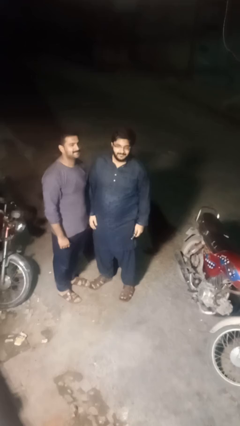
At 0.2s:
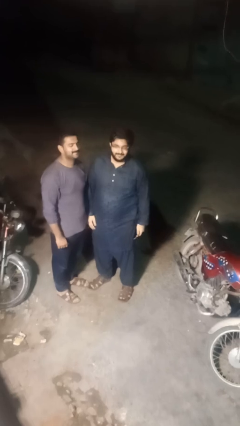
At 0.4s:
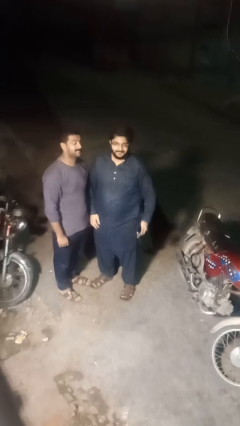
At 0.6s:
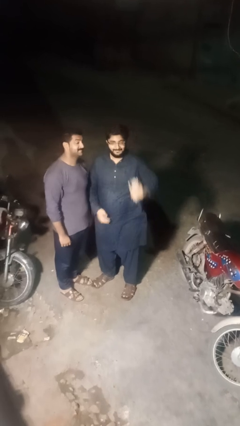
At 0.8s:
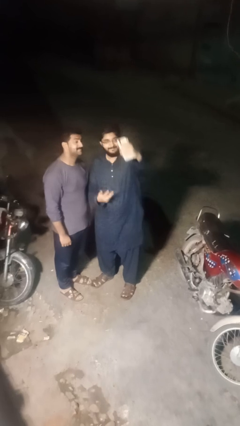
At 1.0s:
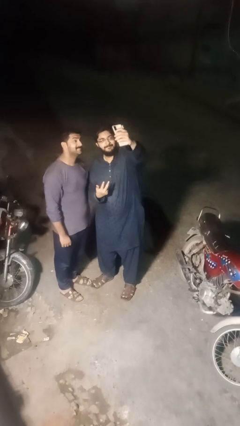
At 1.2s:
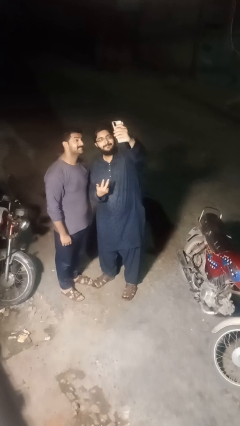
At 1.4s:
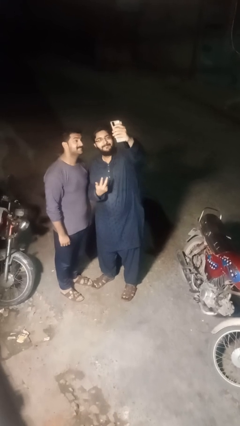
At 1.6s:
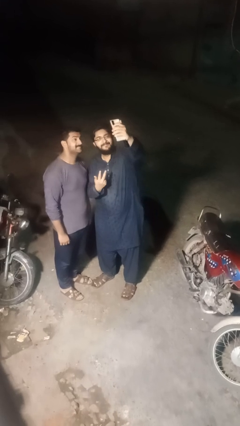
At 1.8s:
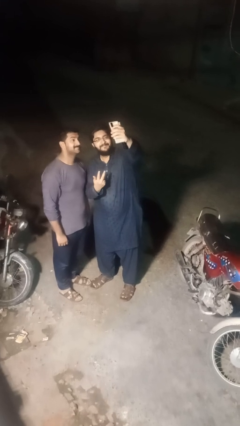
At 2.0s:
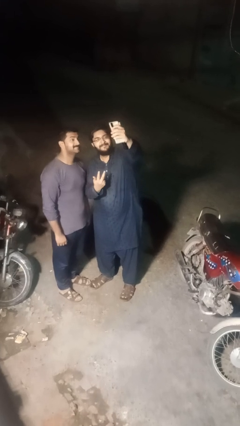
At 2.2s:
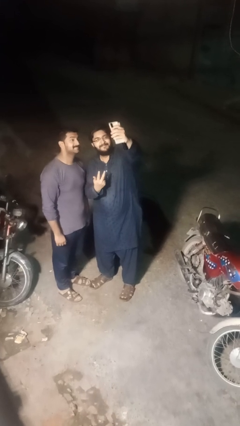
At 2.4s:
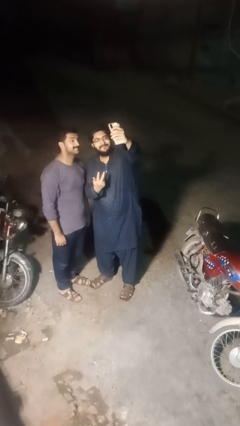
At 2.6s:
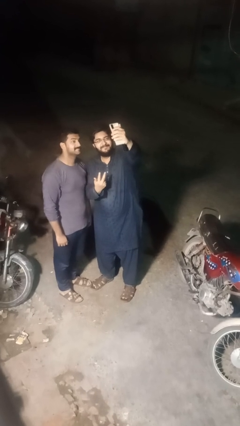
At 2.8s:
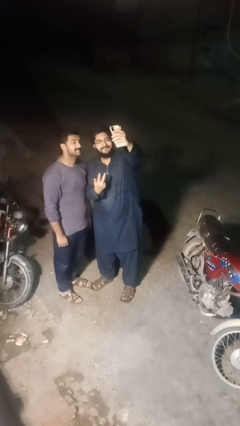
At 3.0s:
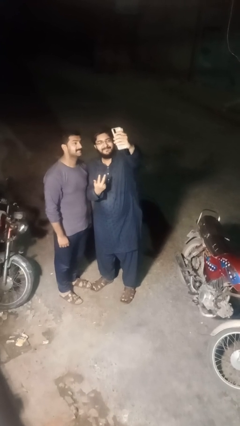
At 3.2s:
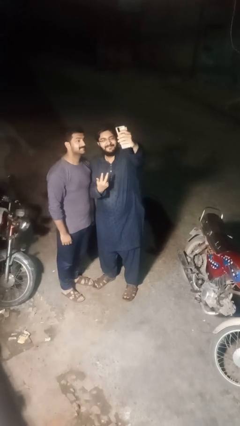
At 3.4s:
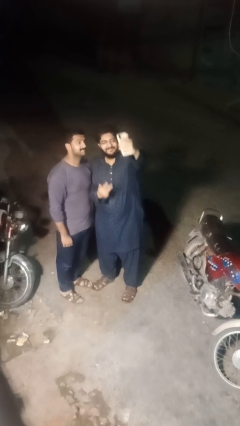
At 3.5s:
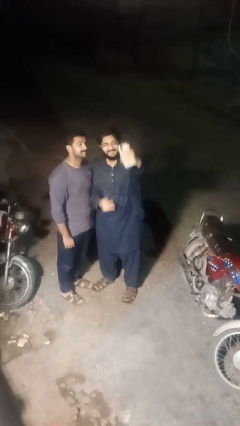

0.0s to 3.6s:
person takes selfie with person

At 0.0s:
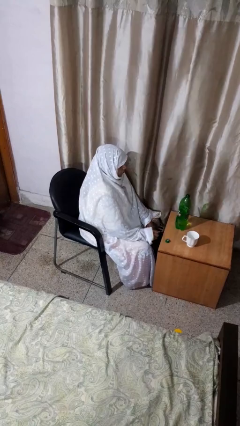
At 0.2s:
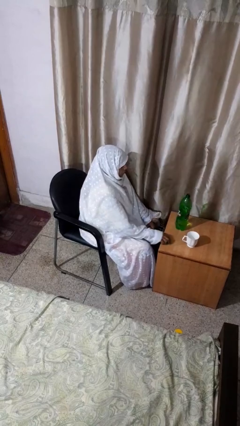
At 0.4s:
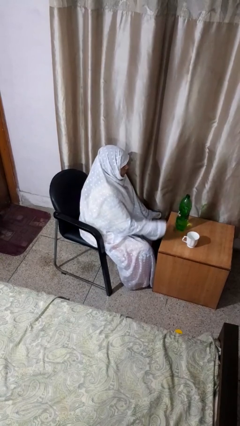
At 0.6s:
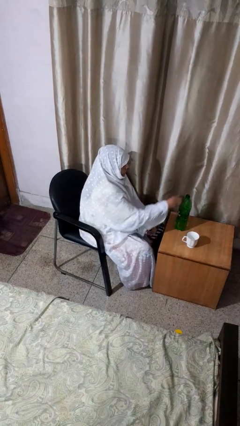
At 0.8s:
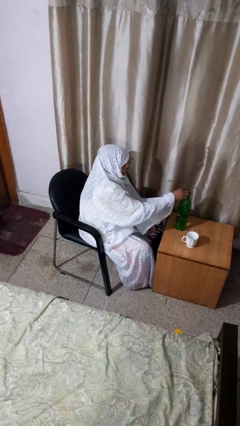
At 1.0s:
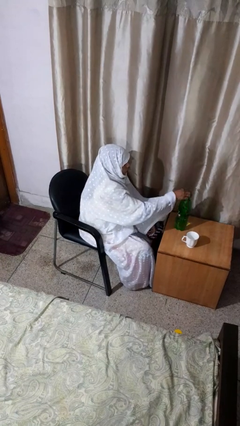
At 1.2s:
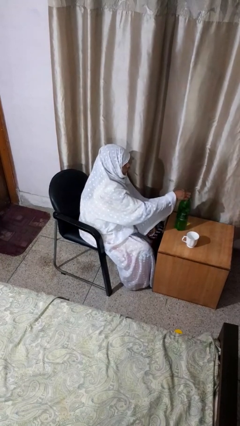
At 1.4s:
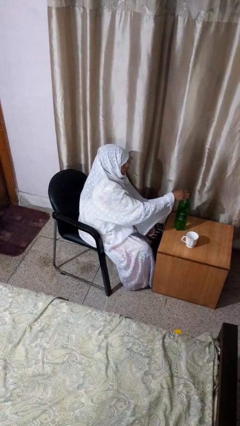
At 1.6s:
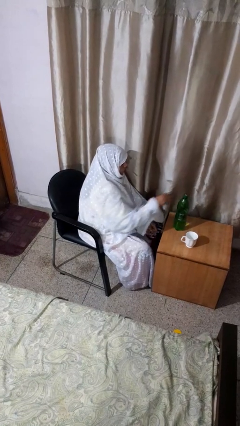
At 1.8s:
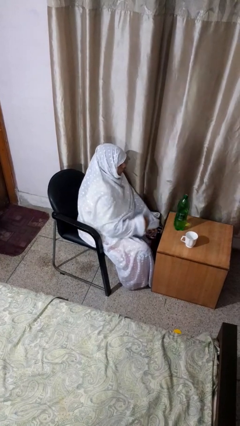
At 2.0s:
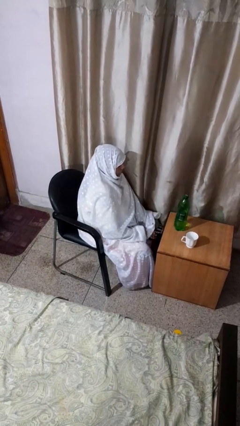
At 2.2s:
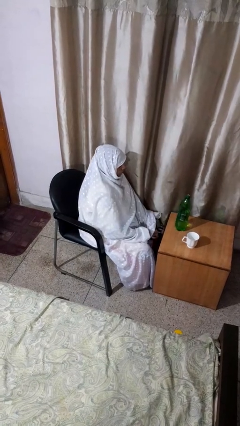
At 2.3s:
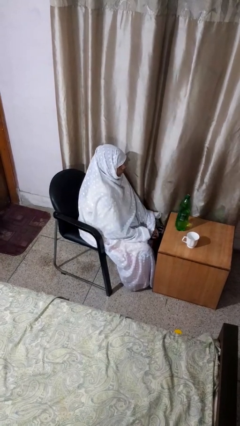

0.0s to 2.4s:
person screws lid to bottle

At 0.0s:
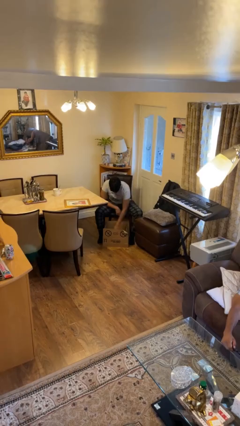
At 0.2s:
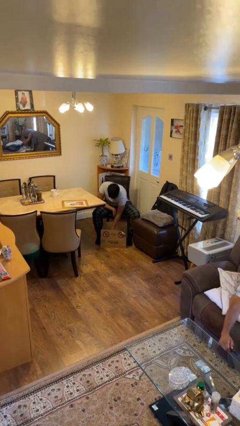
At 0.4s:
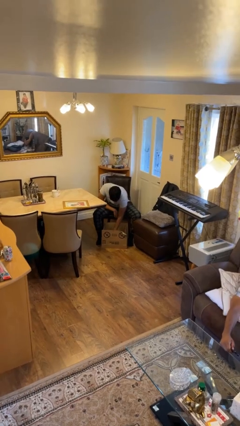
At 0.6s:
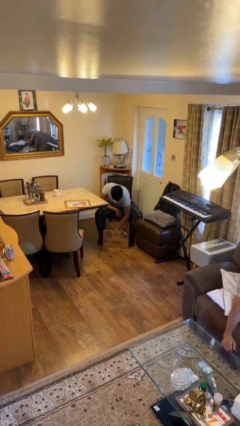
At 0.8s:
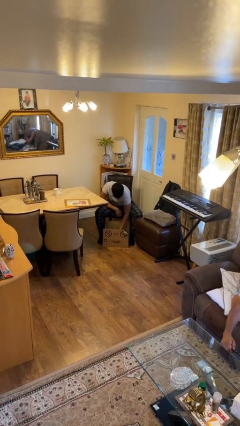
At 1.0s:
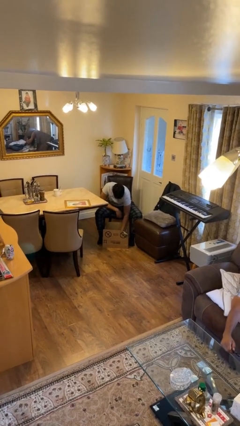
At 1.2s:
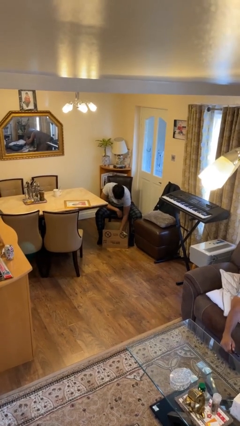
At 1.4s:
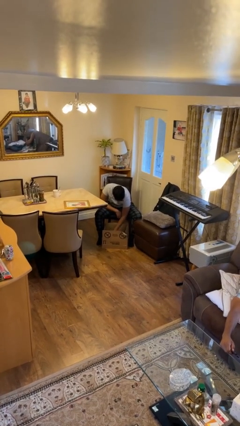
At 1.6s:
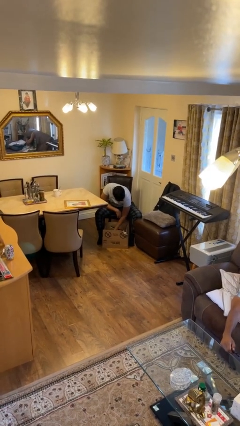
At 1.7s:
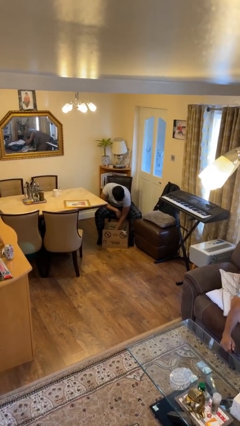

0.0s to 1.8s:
person searches in box

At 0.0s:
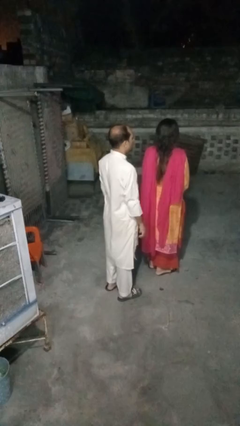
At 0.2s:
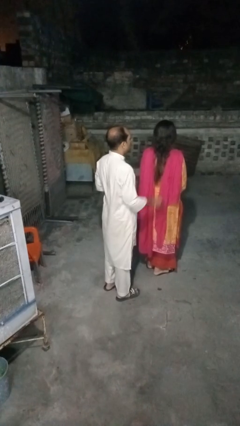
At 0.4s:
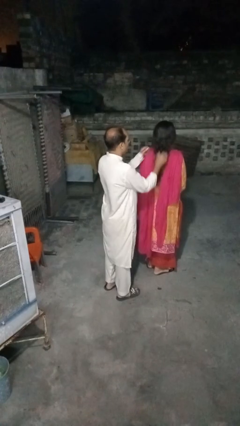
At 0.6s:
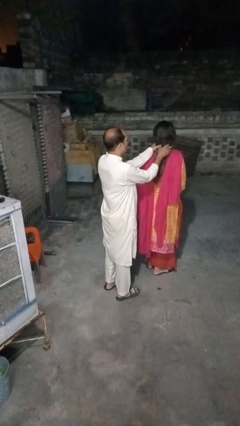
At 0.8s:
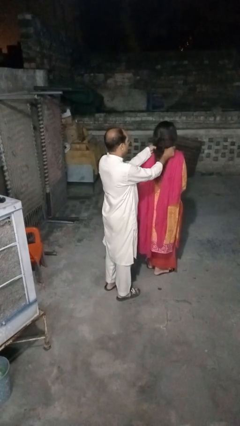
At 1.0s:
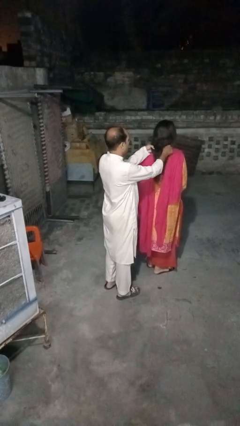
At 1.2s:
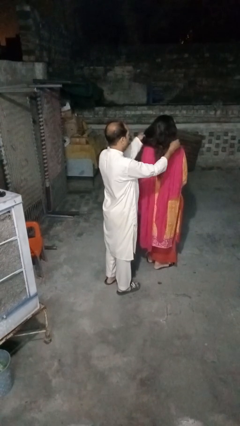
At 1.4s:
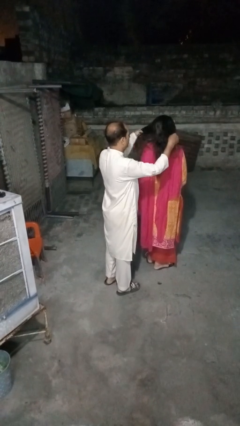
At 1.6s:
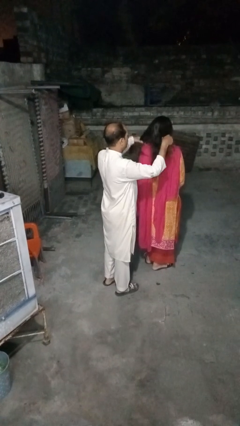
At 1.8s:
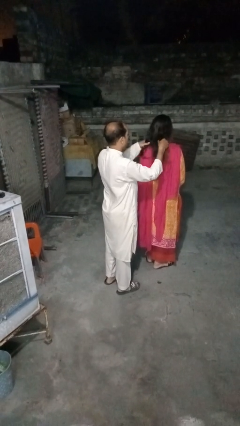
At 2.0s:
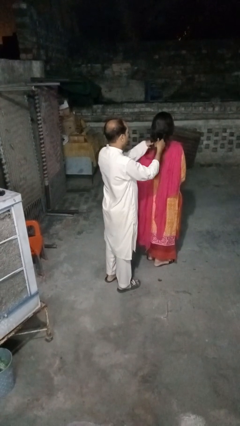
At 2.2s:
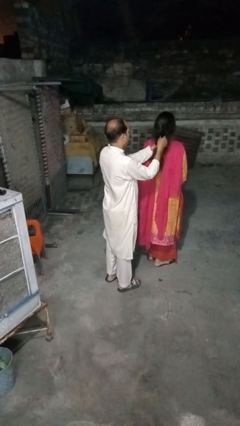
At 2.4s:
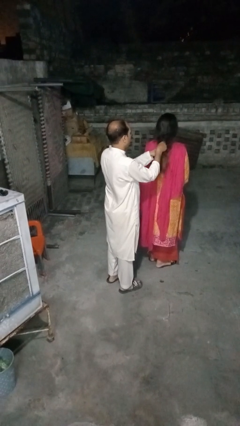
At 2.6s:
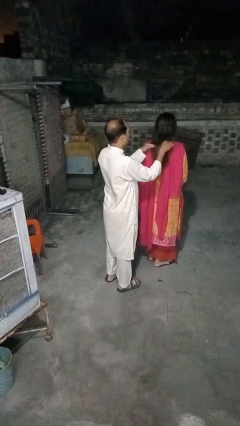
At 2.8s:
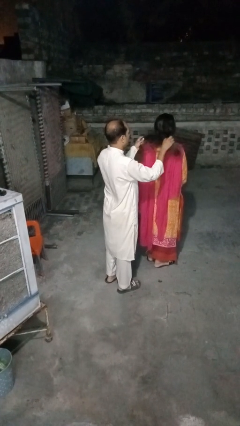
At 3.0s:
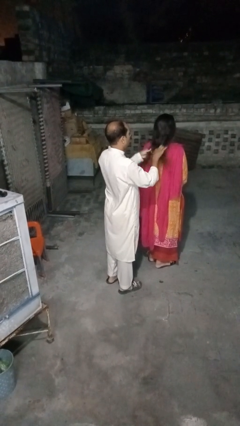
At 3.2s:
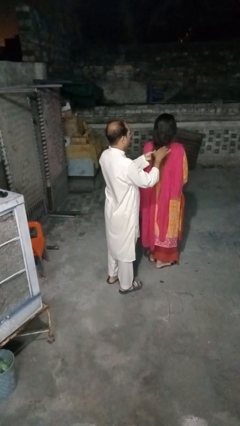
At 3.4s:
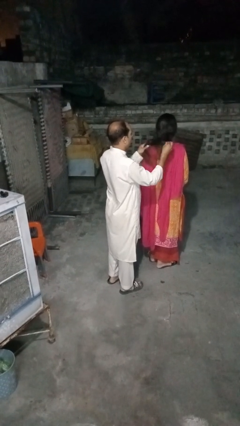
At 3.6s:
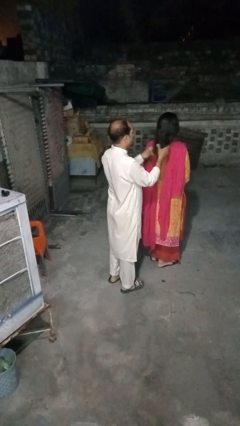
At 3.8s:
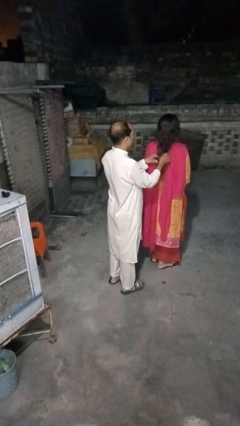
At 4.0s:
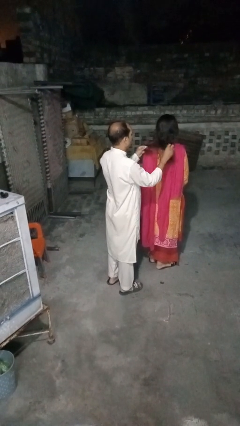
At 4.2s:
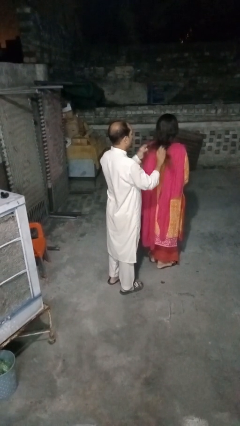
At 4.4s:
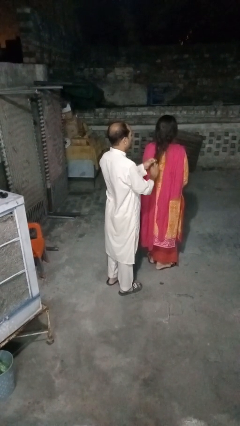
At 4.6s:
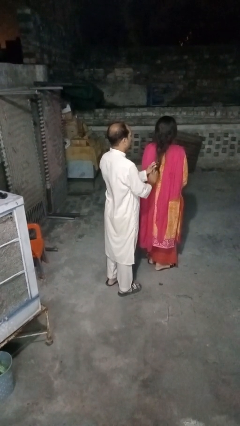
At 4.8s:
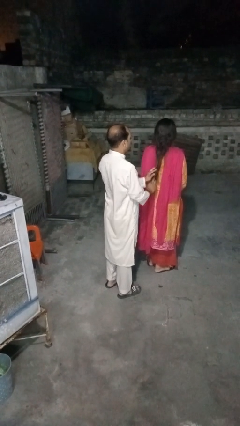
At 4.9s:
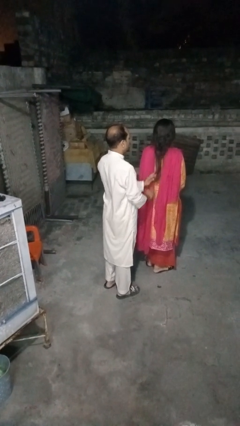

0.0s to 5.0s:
person braids hair of person

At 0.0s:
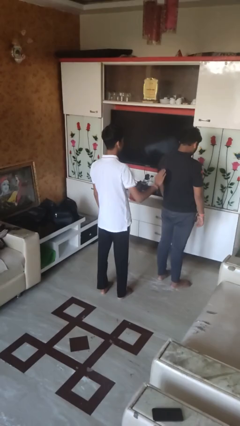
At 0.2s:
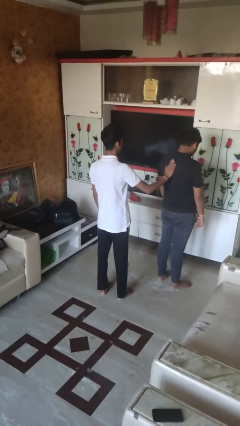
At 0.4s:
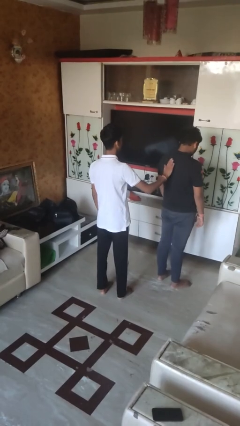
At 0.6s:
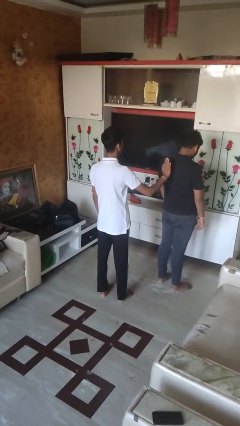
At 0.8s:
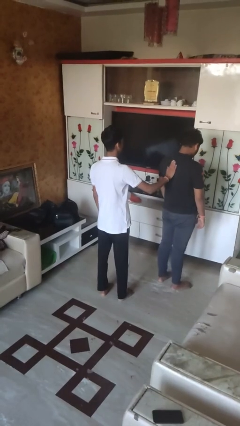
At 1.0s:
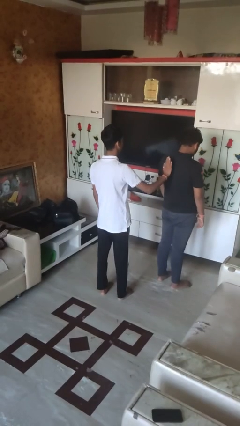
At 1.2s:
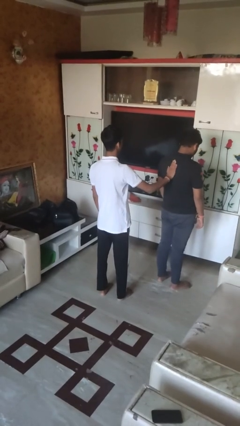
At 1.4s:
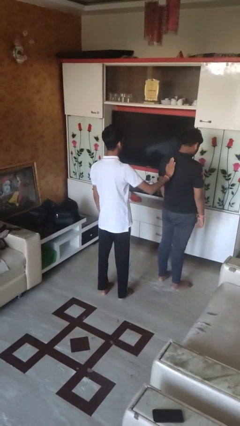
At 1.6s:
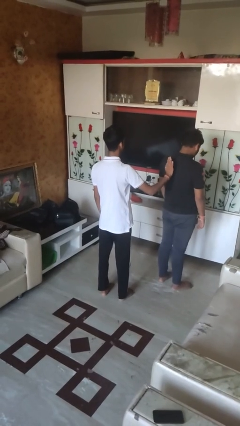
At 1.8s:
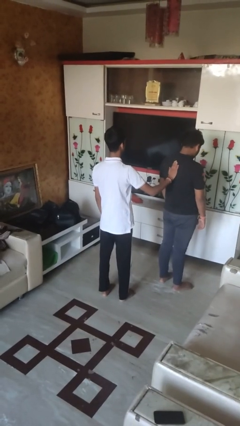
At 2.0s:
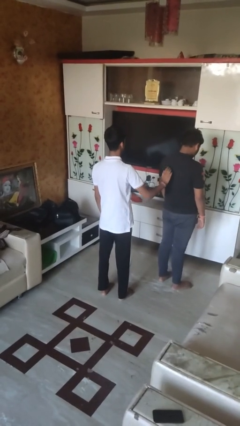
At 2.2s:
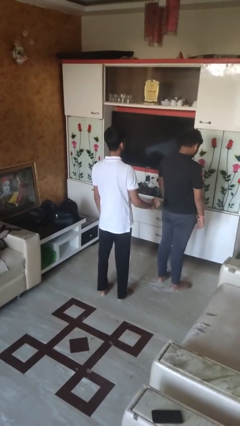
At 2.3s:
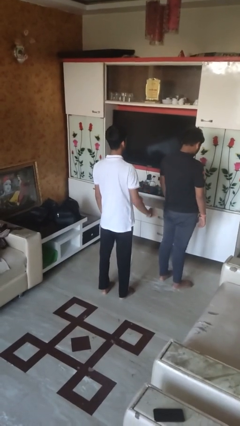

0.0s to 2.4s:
person touches back of person

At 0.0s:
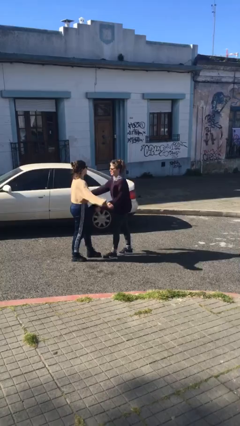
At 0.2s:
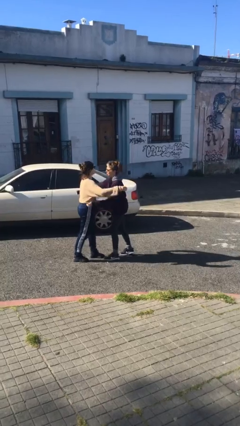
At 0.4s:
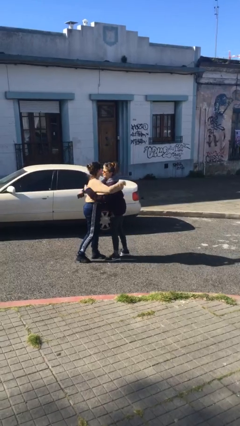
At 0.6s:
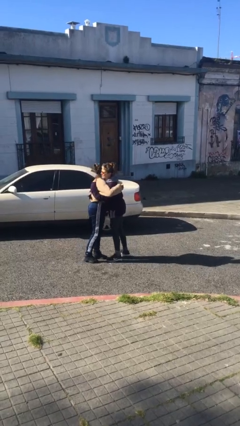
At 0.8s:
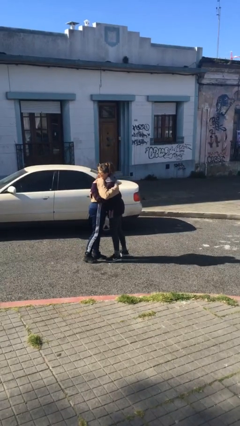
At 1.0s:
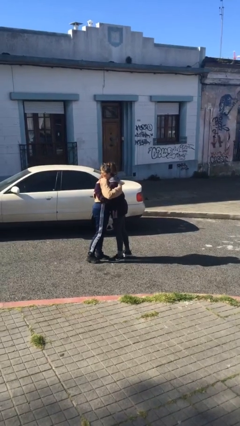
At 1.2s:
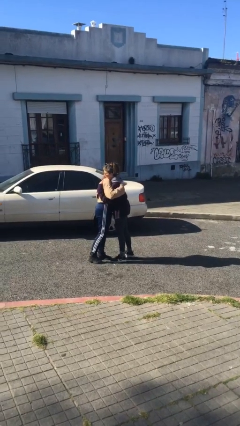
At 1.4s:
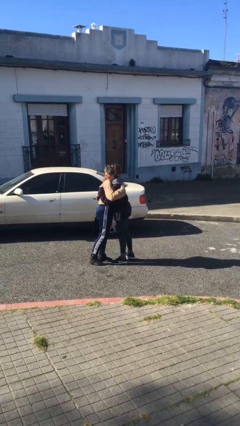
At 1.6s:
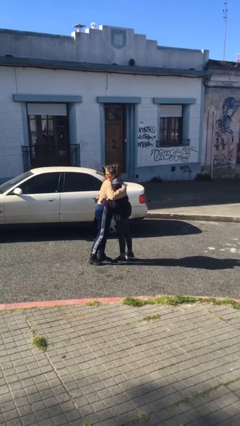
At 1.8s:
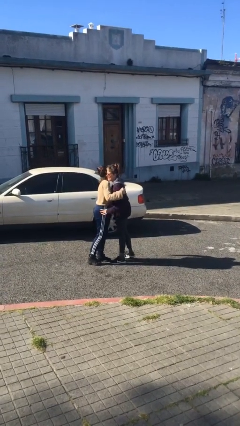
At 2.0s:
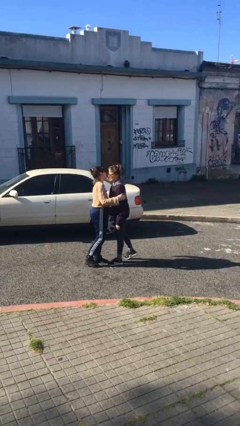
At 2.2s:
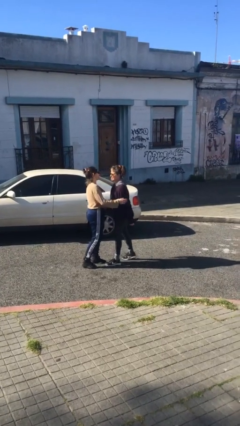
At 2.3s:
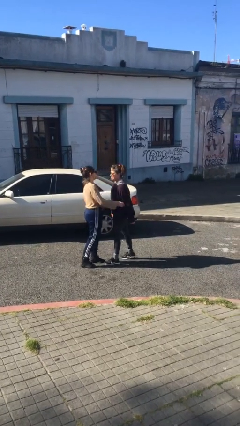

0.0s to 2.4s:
person embraces person

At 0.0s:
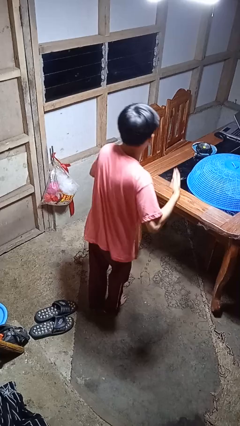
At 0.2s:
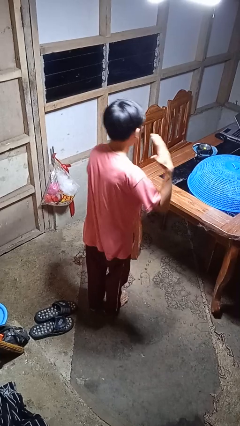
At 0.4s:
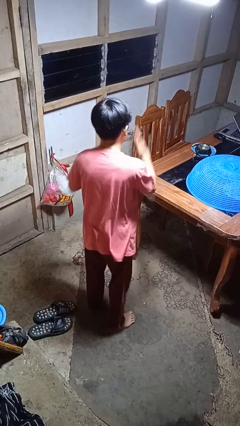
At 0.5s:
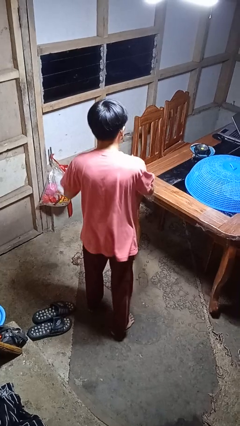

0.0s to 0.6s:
person karate chop
